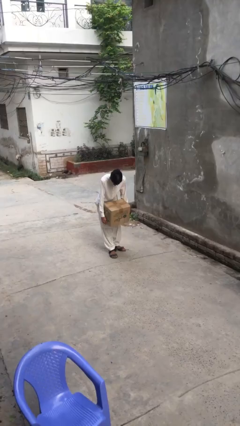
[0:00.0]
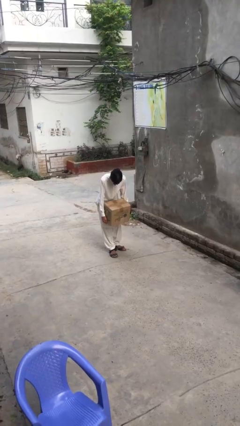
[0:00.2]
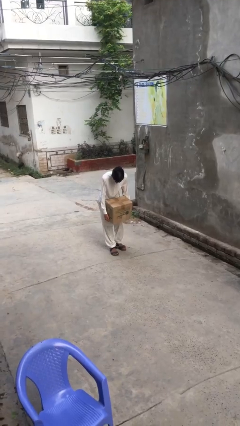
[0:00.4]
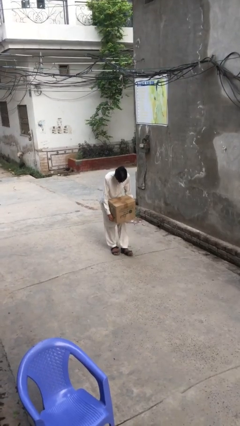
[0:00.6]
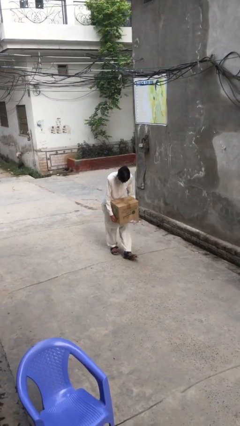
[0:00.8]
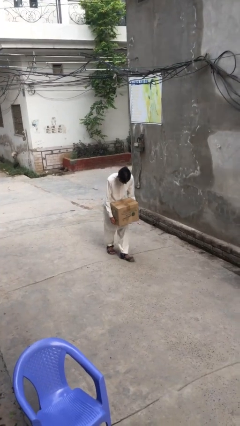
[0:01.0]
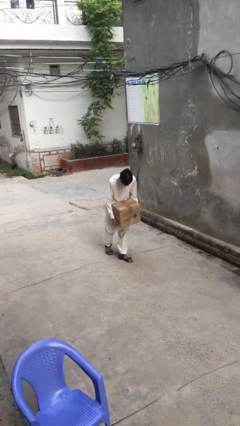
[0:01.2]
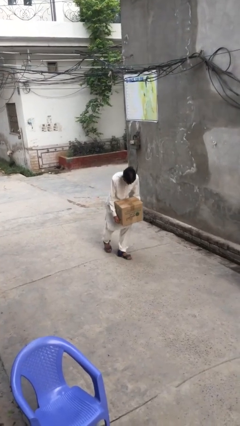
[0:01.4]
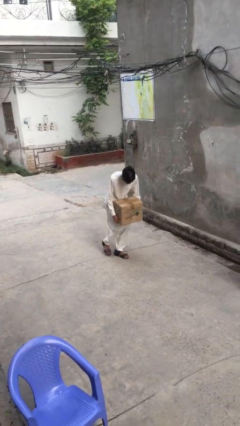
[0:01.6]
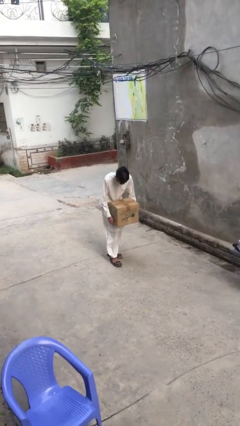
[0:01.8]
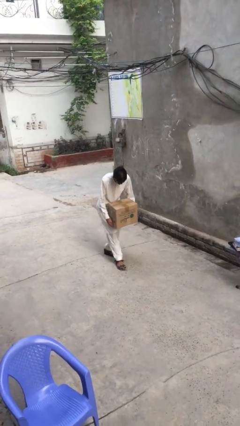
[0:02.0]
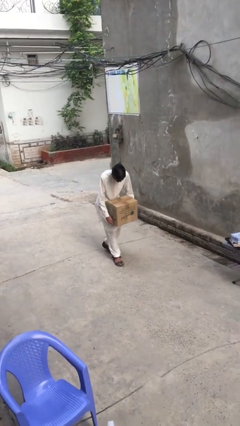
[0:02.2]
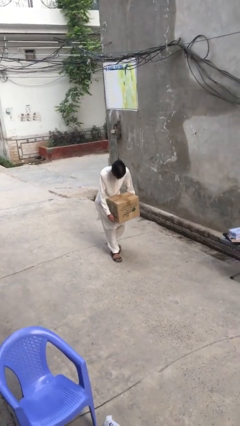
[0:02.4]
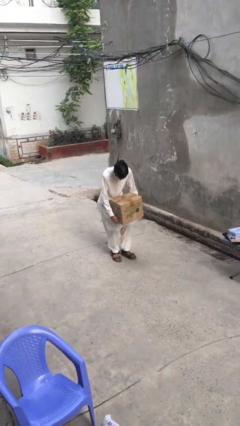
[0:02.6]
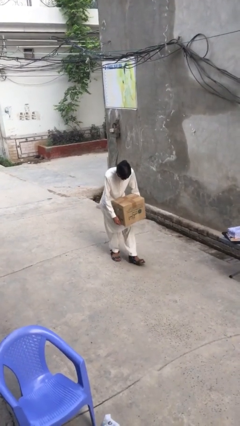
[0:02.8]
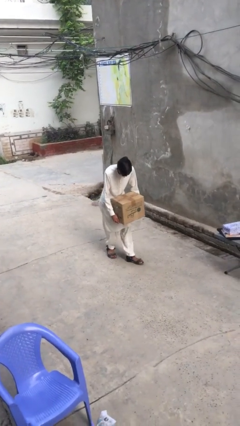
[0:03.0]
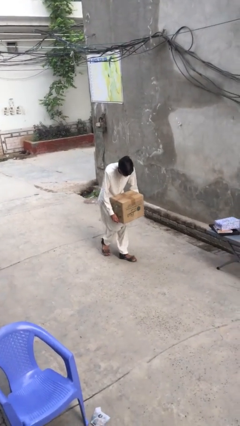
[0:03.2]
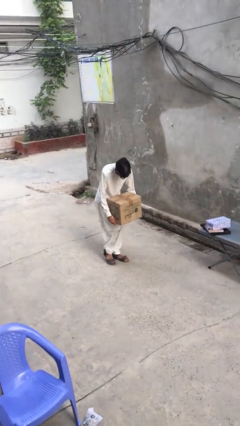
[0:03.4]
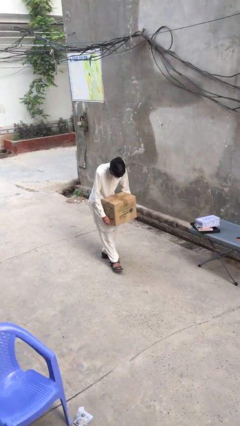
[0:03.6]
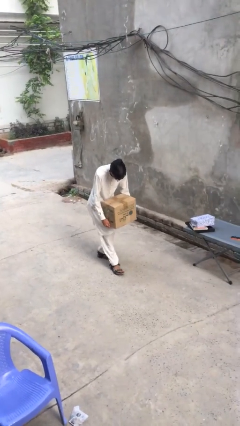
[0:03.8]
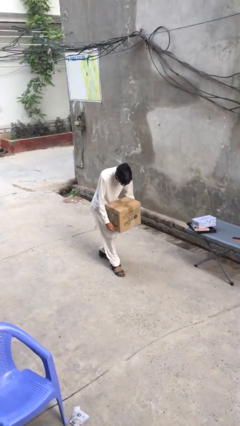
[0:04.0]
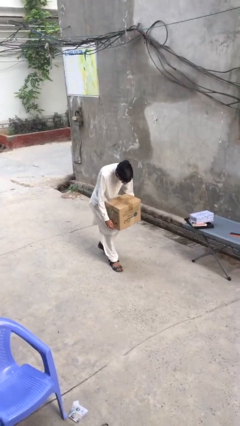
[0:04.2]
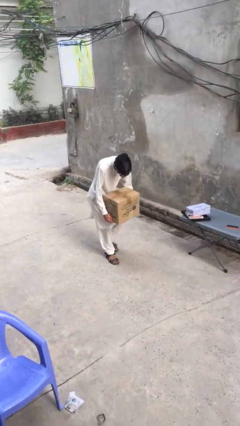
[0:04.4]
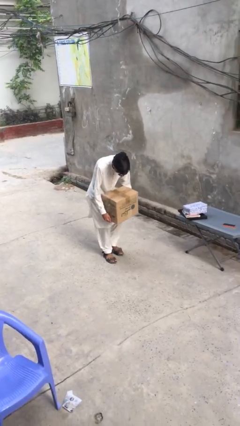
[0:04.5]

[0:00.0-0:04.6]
person carries heavy object

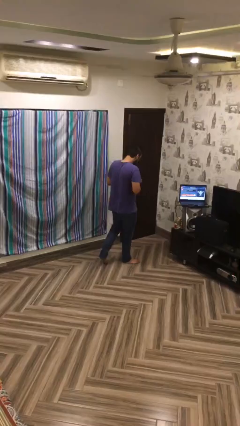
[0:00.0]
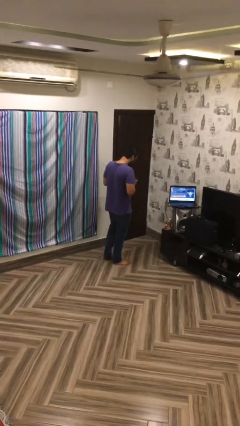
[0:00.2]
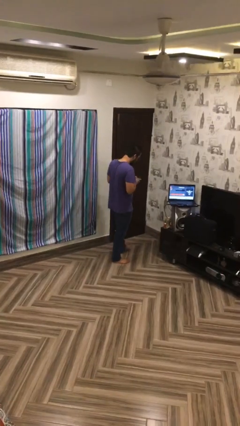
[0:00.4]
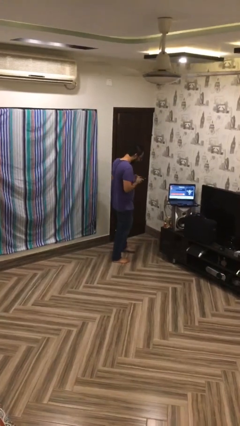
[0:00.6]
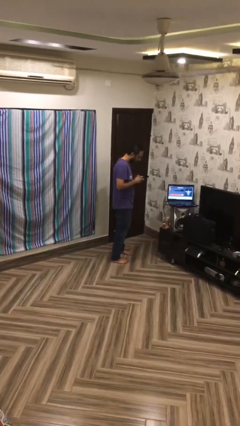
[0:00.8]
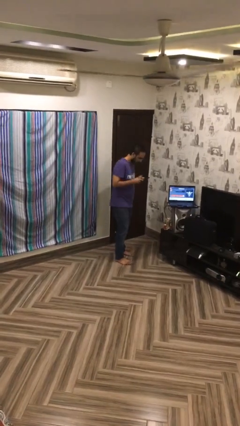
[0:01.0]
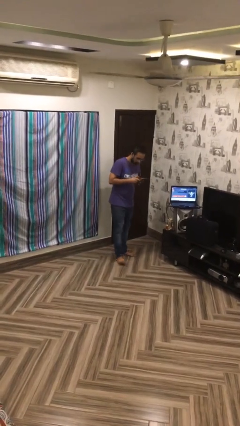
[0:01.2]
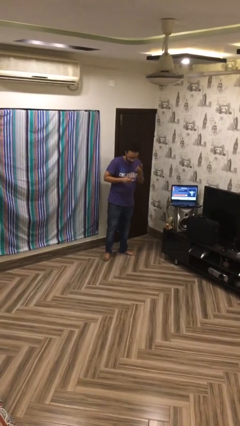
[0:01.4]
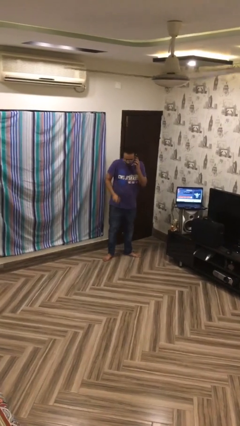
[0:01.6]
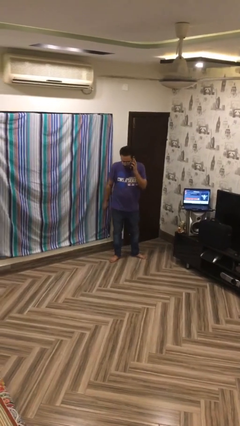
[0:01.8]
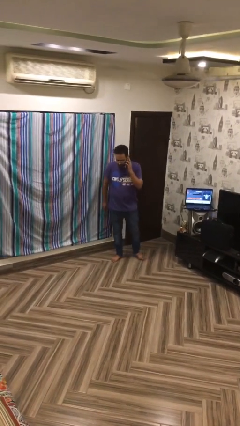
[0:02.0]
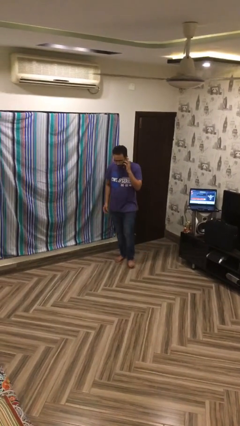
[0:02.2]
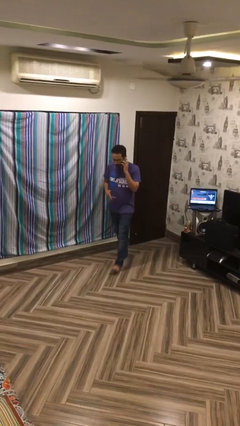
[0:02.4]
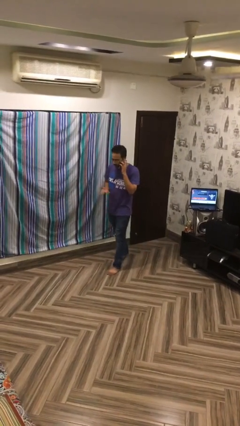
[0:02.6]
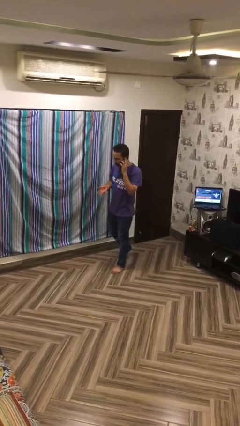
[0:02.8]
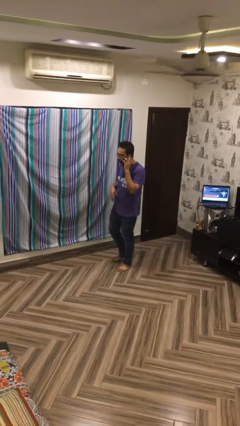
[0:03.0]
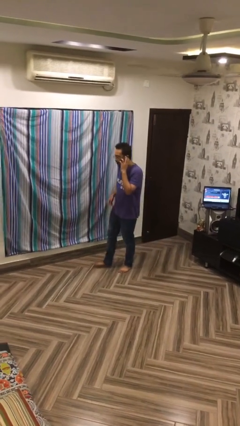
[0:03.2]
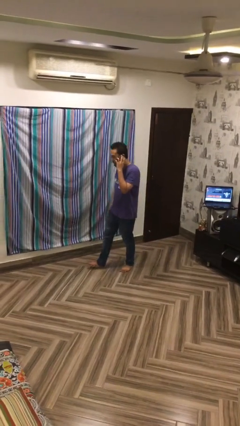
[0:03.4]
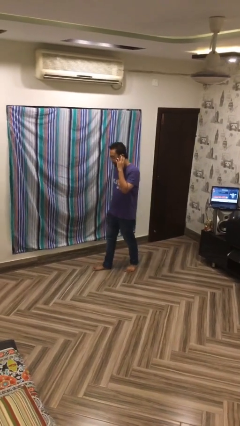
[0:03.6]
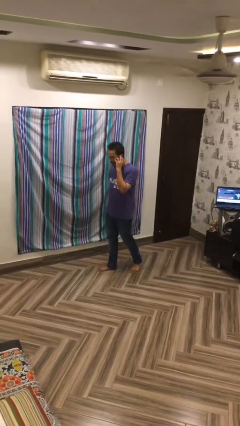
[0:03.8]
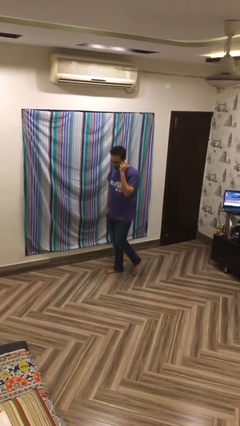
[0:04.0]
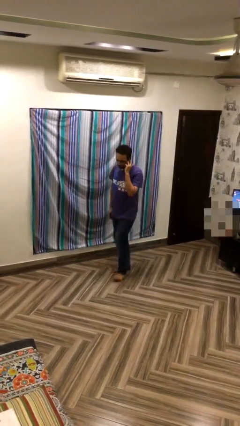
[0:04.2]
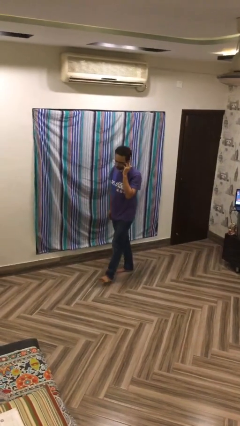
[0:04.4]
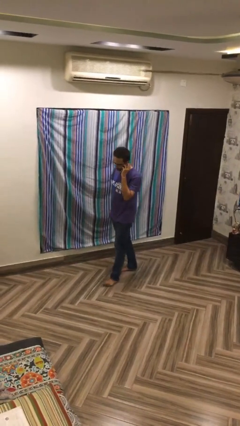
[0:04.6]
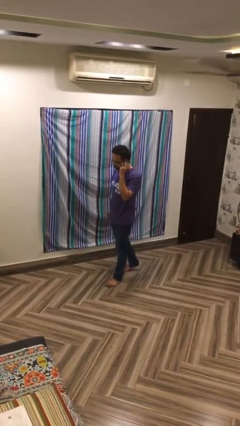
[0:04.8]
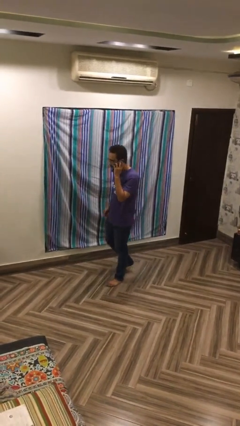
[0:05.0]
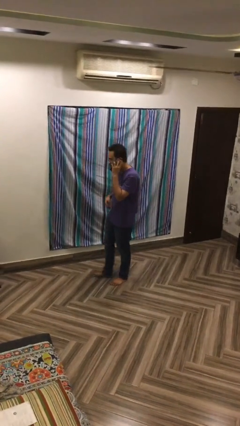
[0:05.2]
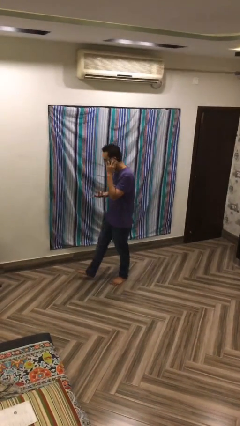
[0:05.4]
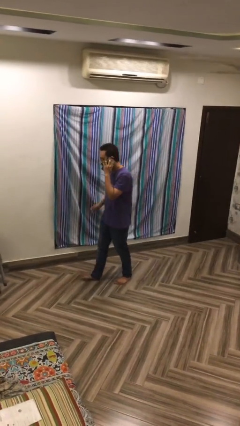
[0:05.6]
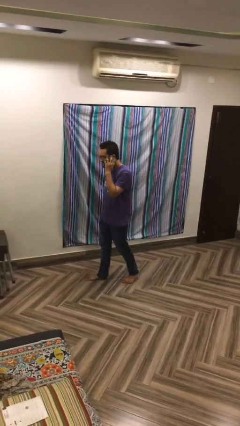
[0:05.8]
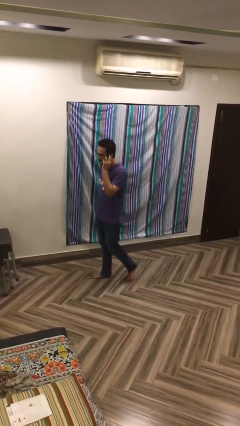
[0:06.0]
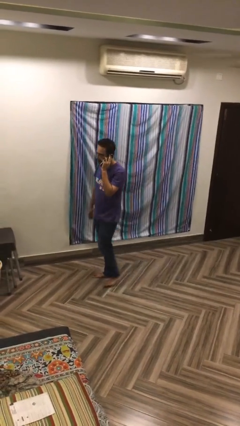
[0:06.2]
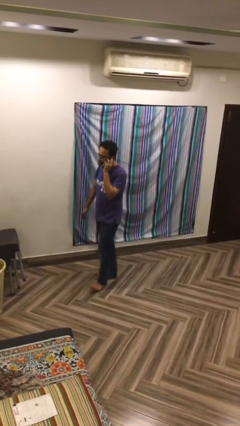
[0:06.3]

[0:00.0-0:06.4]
person talks on phone

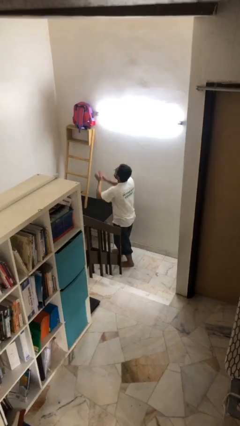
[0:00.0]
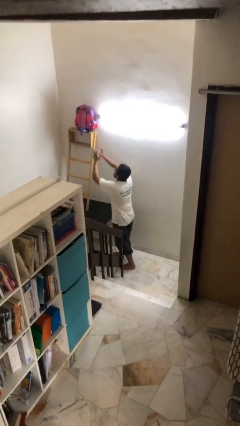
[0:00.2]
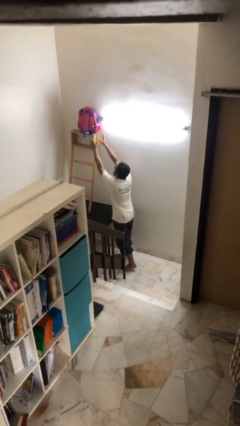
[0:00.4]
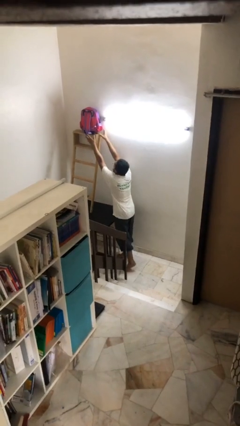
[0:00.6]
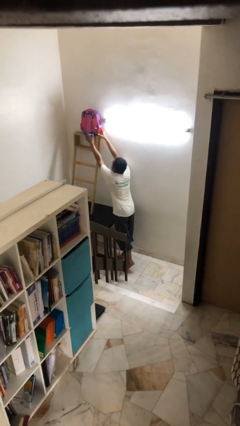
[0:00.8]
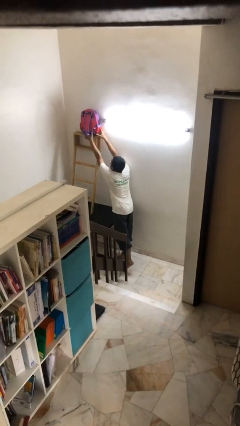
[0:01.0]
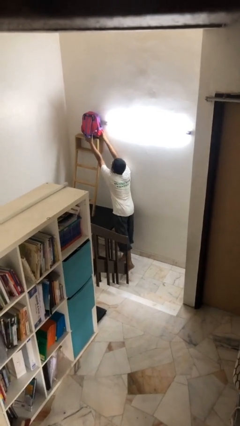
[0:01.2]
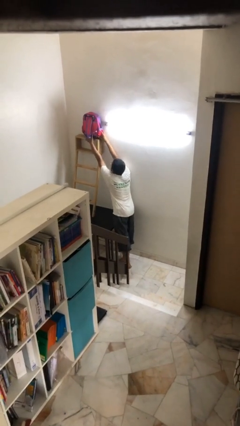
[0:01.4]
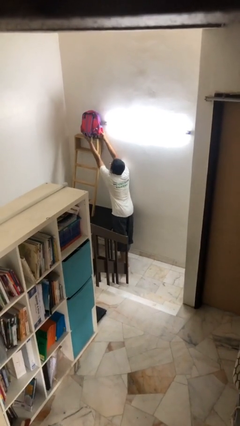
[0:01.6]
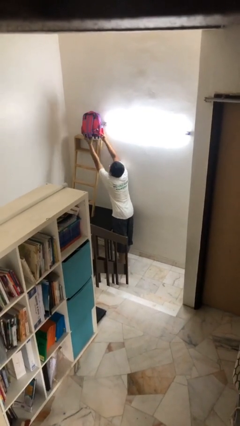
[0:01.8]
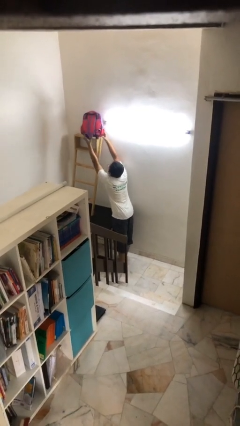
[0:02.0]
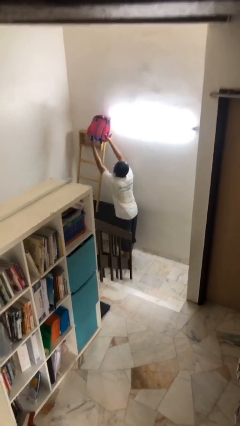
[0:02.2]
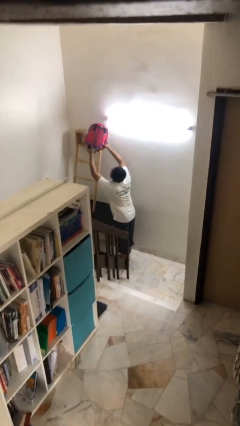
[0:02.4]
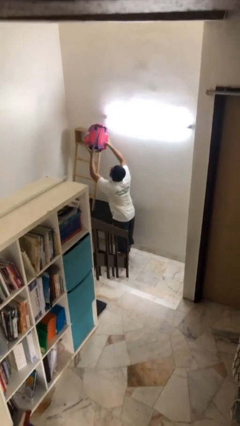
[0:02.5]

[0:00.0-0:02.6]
person picks up object from shelf

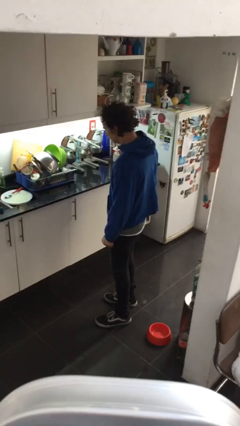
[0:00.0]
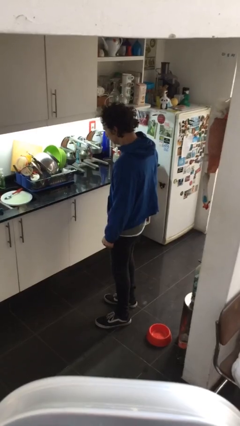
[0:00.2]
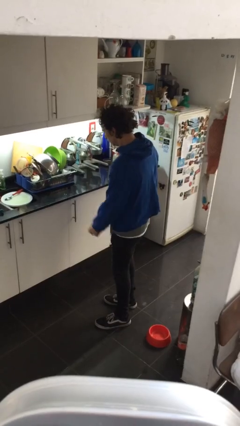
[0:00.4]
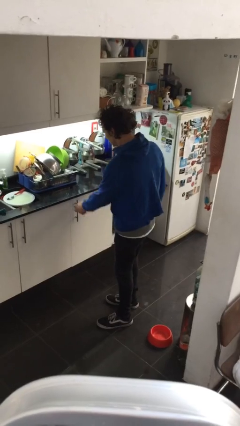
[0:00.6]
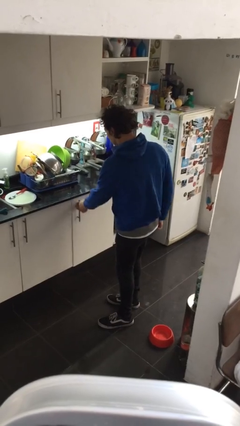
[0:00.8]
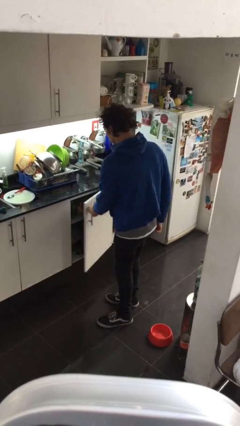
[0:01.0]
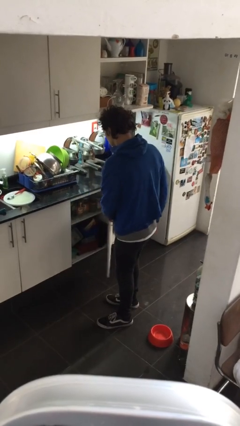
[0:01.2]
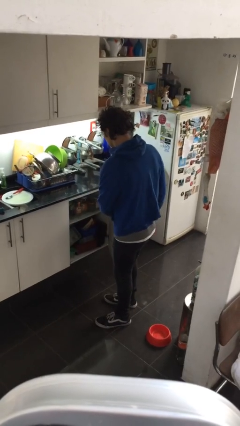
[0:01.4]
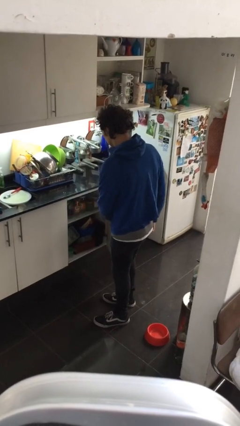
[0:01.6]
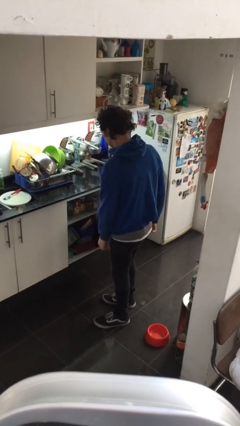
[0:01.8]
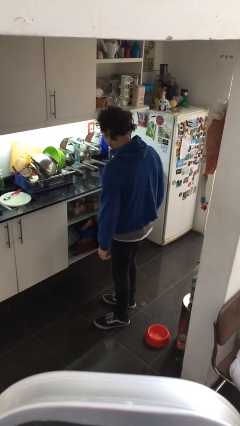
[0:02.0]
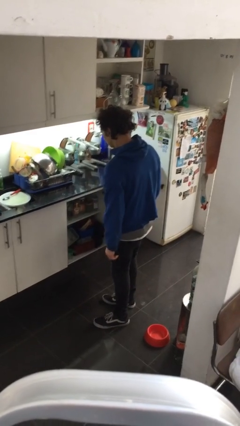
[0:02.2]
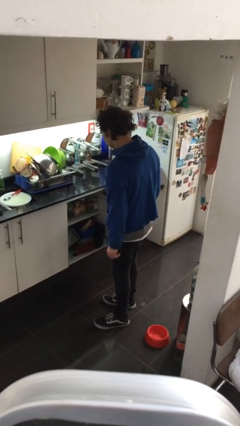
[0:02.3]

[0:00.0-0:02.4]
person opens cabinet

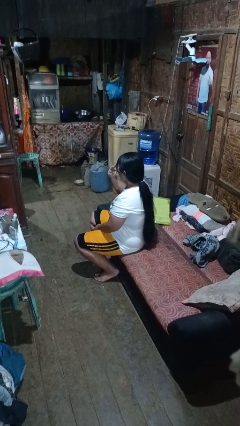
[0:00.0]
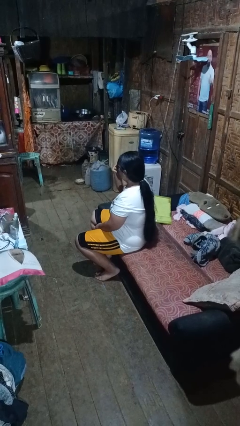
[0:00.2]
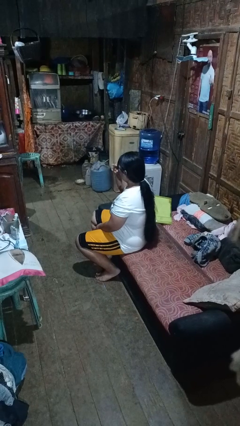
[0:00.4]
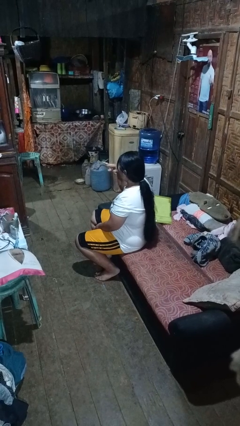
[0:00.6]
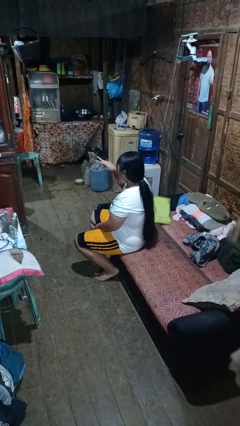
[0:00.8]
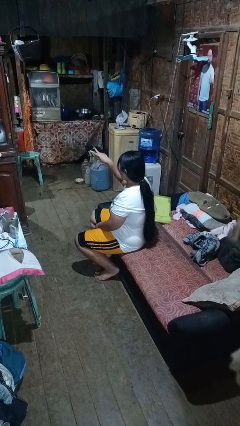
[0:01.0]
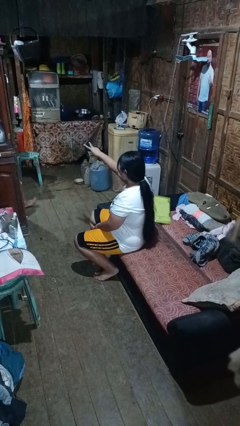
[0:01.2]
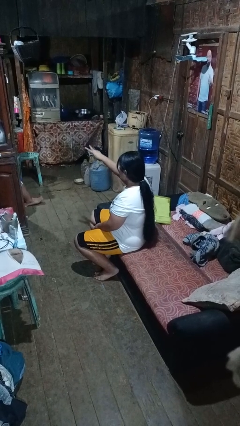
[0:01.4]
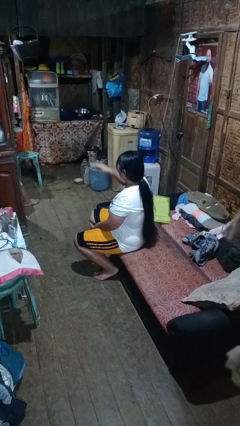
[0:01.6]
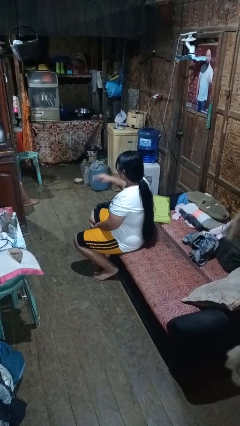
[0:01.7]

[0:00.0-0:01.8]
person gestures watch closely
